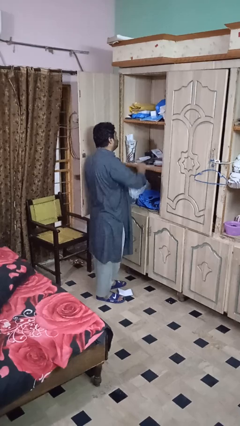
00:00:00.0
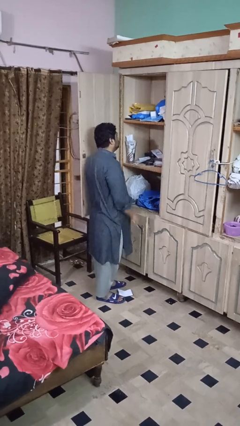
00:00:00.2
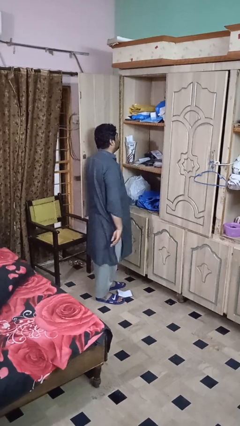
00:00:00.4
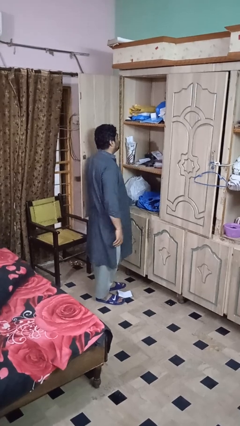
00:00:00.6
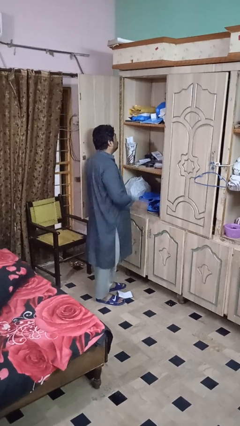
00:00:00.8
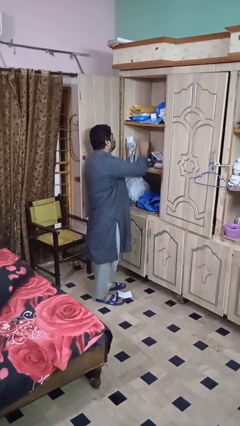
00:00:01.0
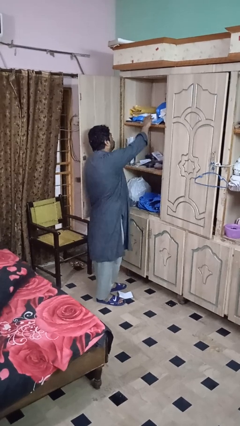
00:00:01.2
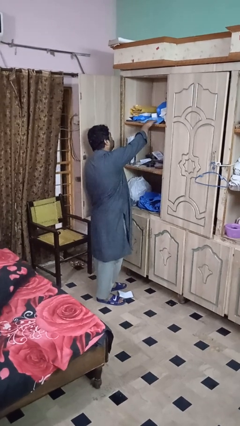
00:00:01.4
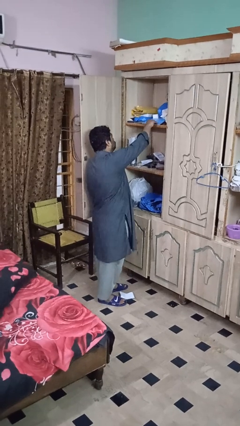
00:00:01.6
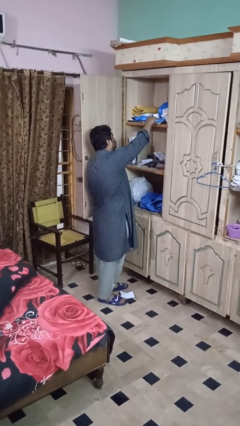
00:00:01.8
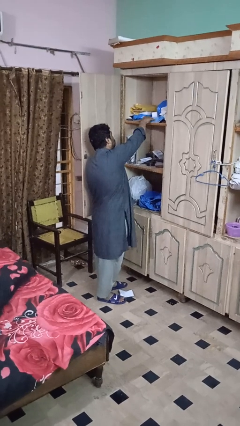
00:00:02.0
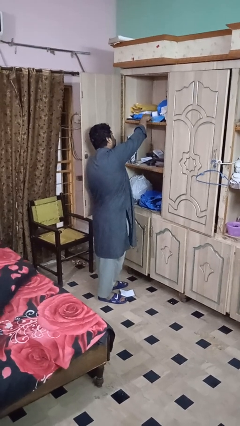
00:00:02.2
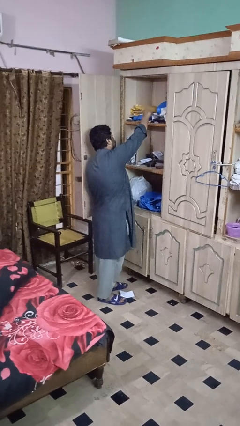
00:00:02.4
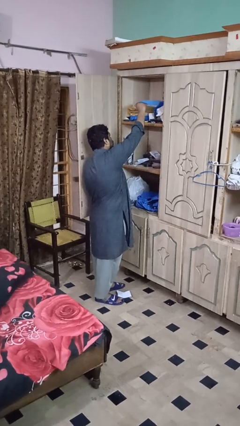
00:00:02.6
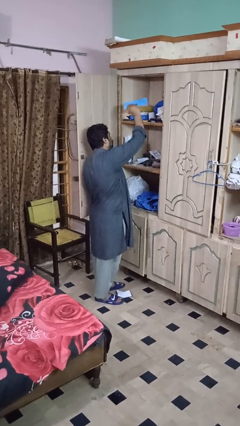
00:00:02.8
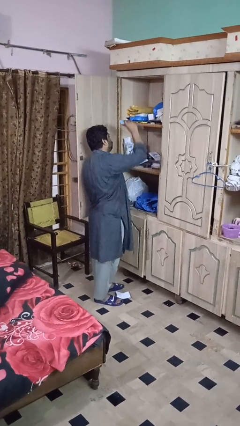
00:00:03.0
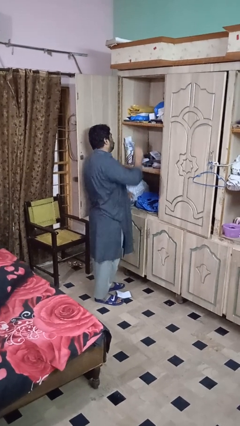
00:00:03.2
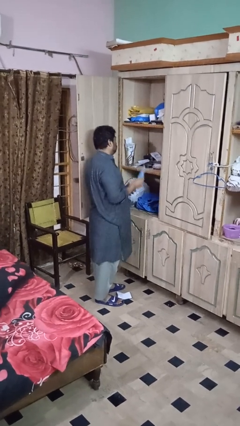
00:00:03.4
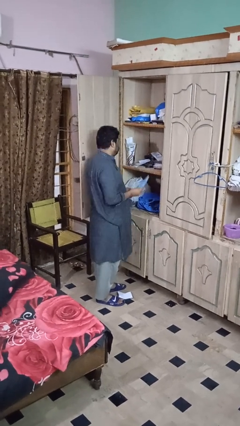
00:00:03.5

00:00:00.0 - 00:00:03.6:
person picks up object from shelf

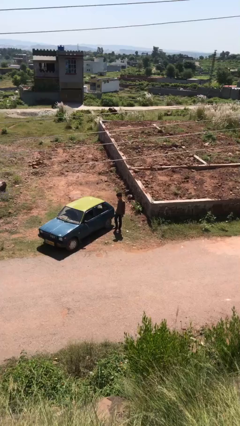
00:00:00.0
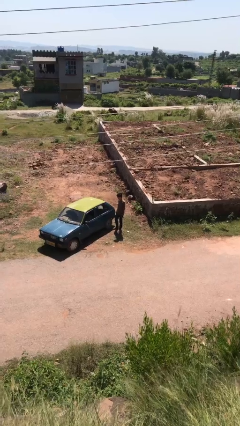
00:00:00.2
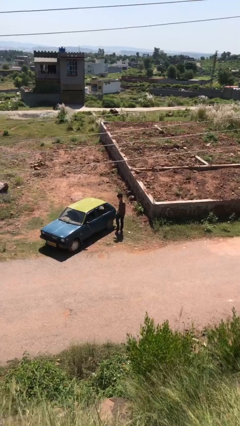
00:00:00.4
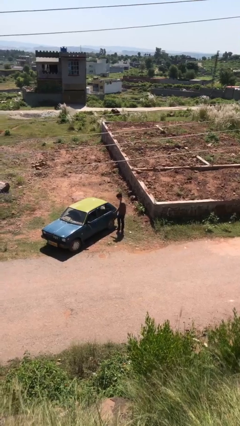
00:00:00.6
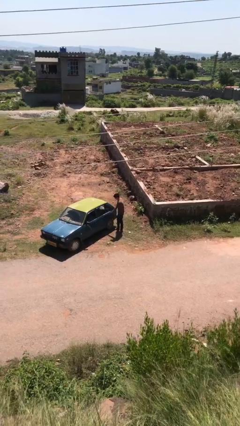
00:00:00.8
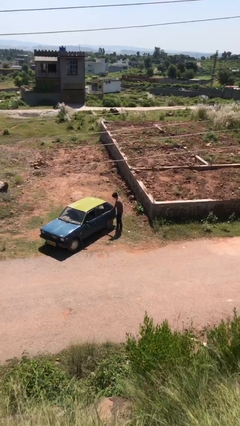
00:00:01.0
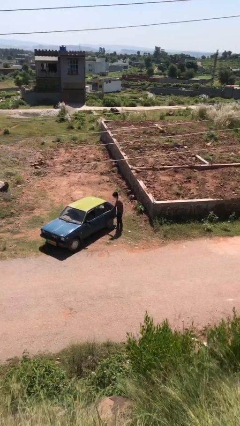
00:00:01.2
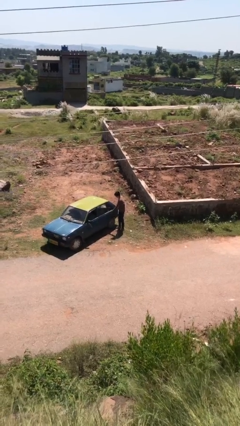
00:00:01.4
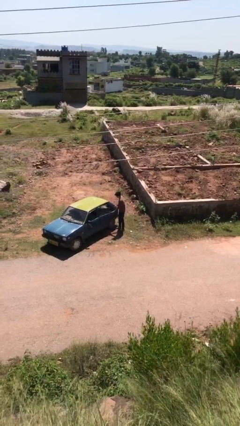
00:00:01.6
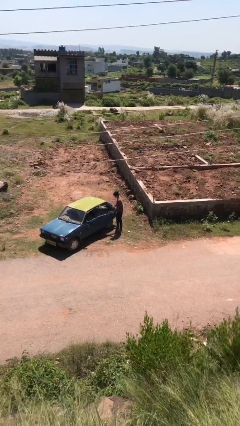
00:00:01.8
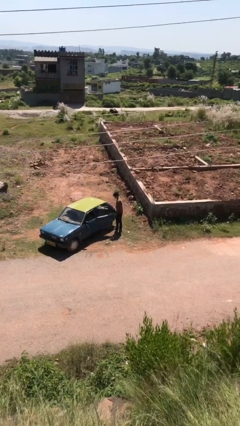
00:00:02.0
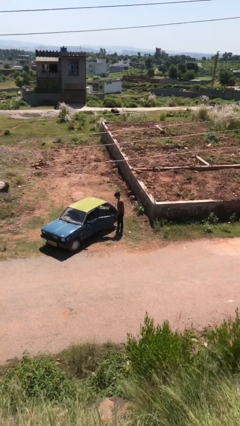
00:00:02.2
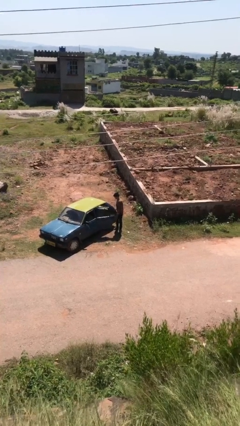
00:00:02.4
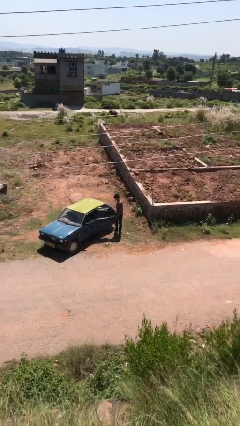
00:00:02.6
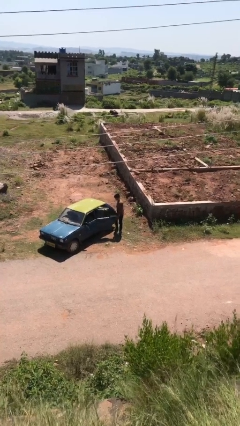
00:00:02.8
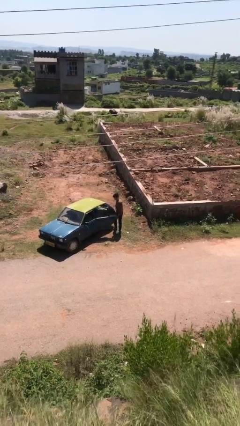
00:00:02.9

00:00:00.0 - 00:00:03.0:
person opens car door

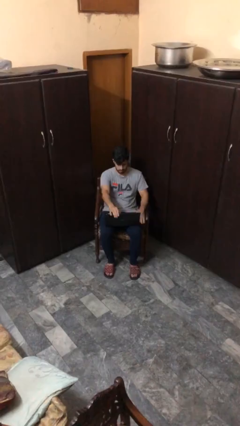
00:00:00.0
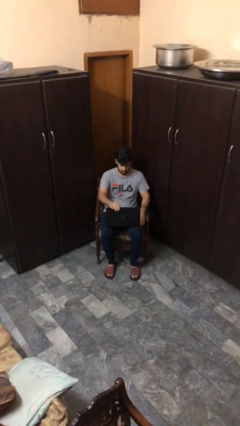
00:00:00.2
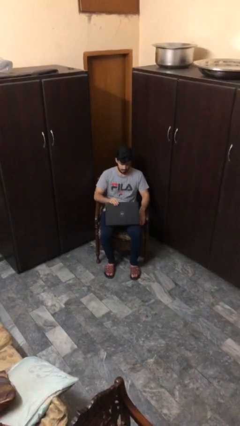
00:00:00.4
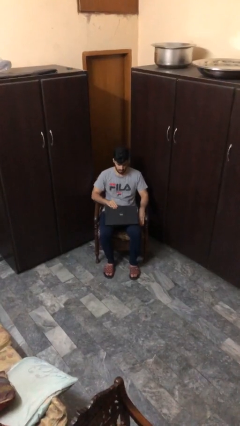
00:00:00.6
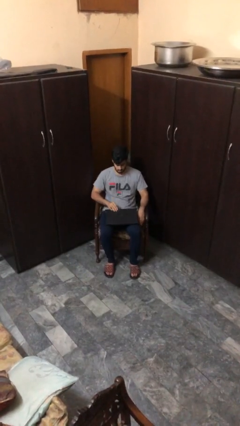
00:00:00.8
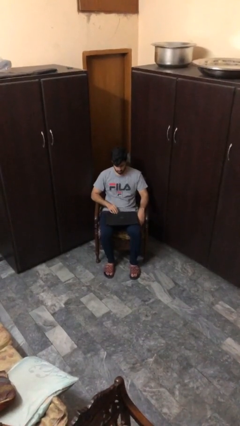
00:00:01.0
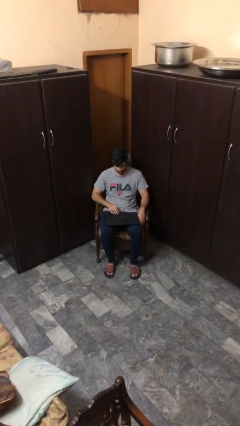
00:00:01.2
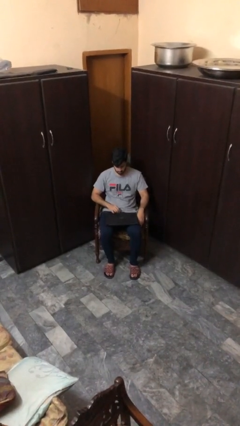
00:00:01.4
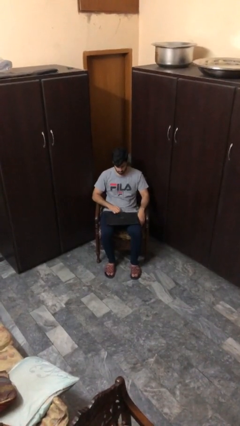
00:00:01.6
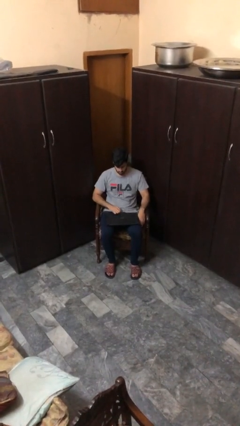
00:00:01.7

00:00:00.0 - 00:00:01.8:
person closes laptop

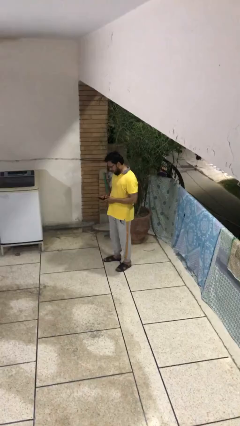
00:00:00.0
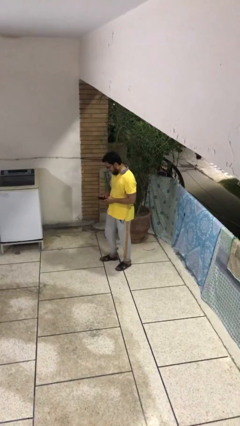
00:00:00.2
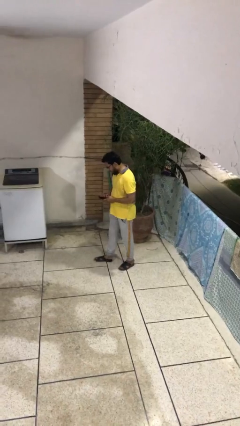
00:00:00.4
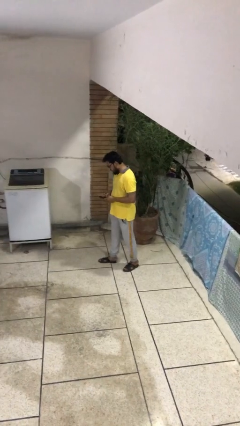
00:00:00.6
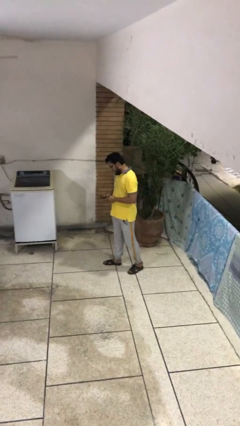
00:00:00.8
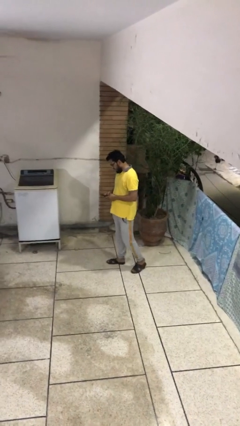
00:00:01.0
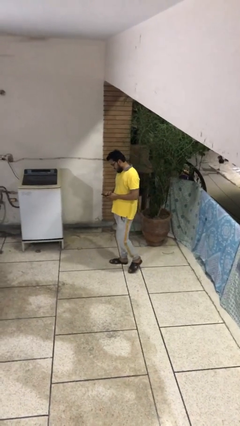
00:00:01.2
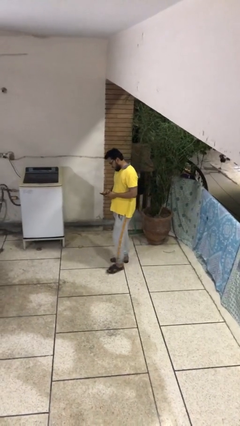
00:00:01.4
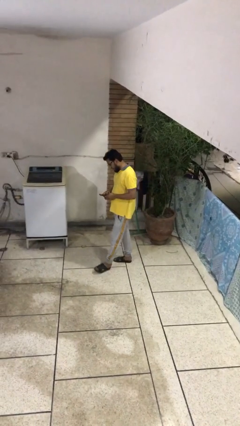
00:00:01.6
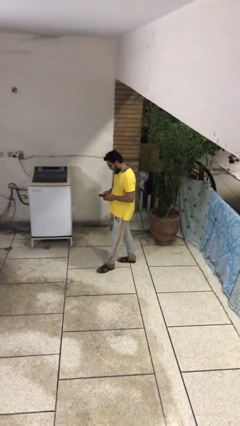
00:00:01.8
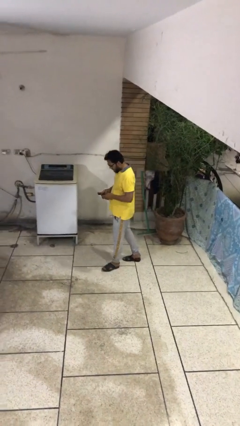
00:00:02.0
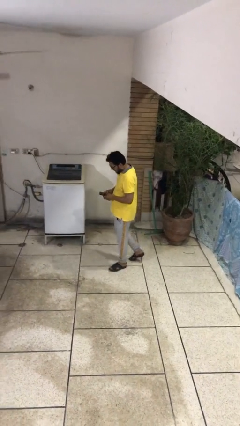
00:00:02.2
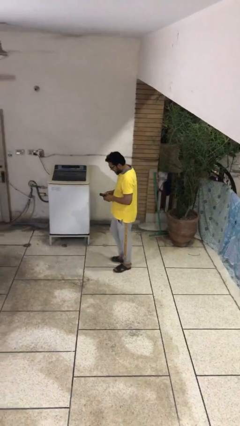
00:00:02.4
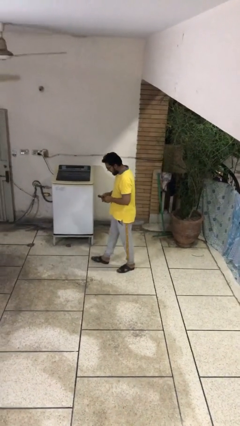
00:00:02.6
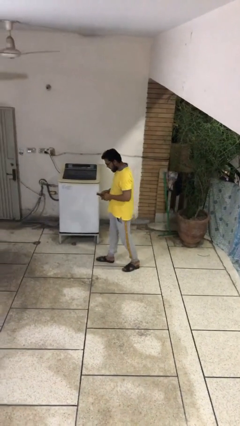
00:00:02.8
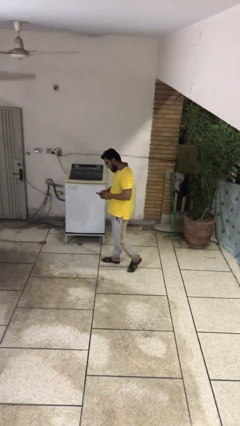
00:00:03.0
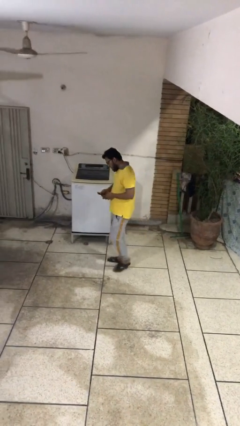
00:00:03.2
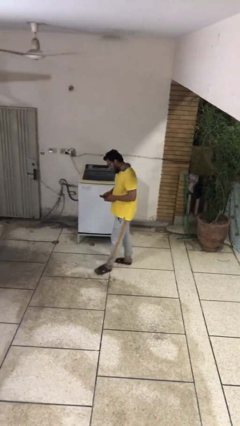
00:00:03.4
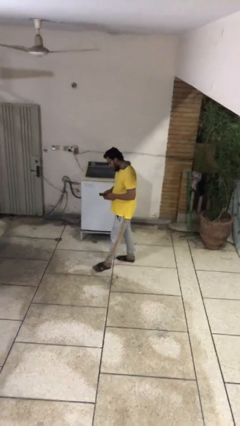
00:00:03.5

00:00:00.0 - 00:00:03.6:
person texts on phone

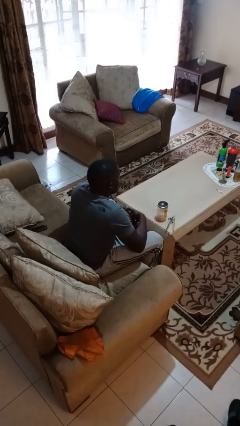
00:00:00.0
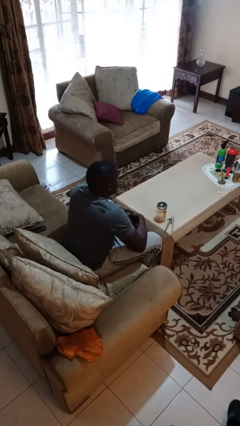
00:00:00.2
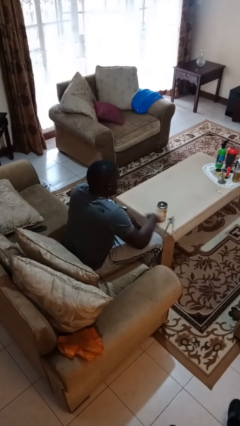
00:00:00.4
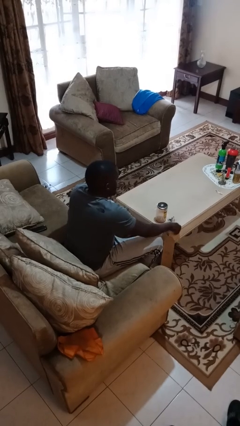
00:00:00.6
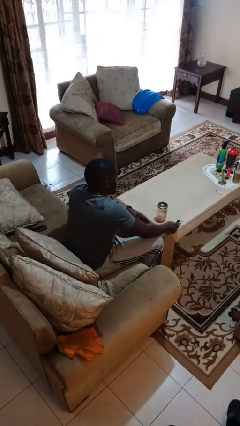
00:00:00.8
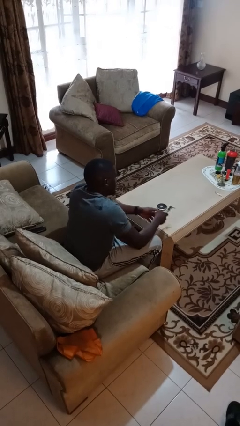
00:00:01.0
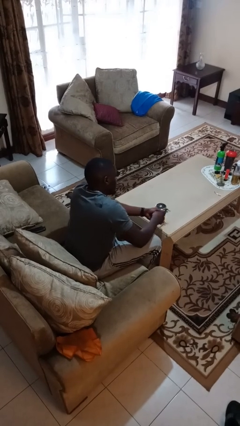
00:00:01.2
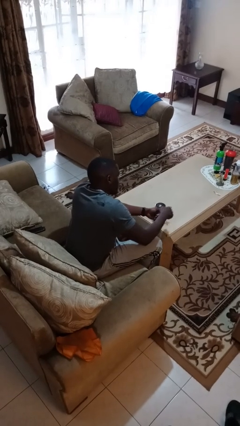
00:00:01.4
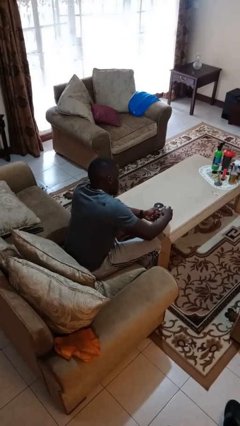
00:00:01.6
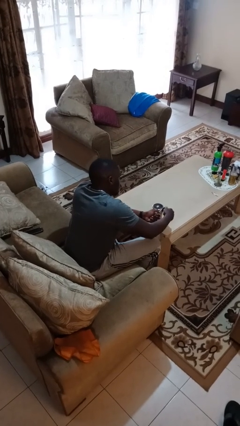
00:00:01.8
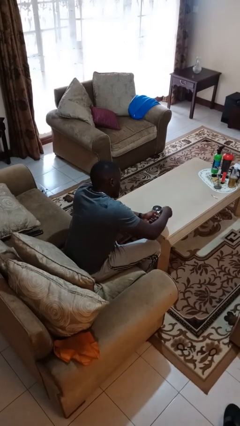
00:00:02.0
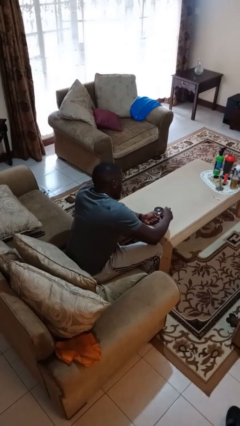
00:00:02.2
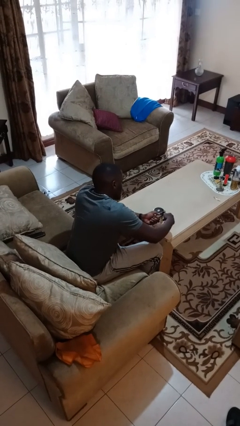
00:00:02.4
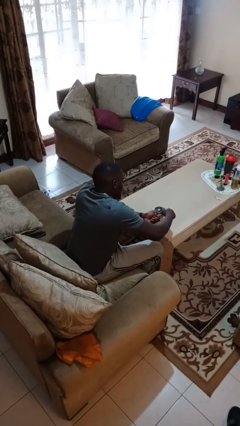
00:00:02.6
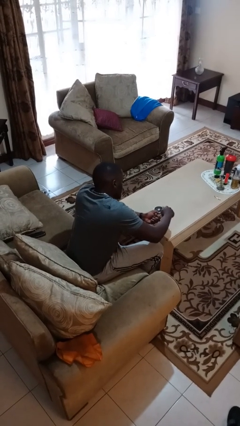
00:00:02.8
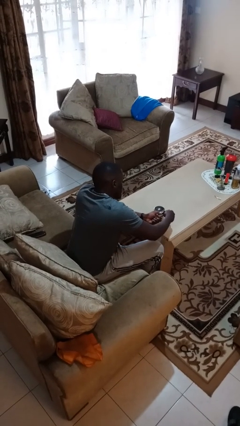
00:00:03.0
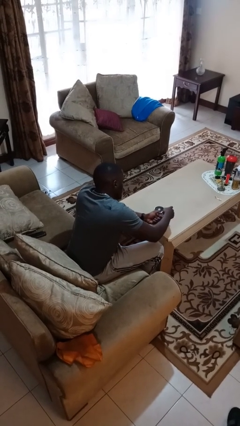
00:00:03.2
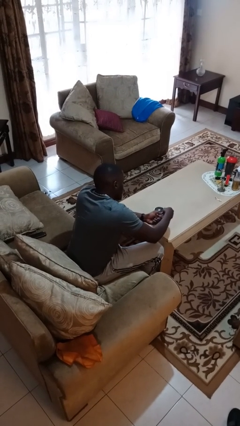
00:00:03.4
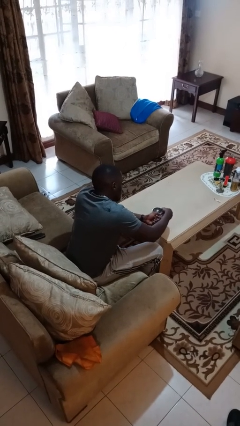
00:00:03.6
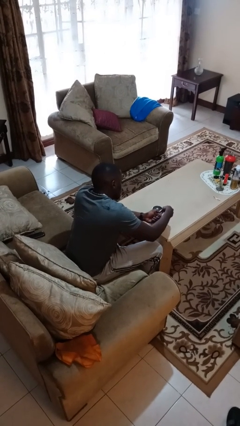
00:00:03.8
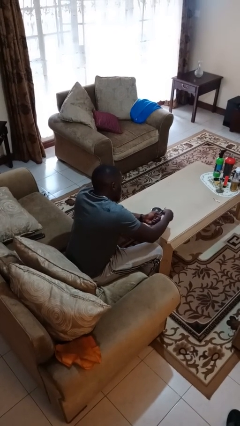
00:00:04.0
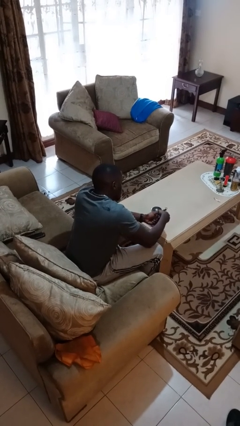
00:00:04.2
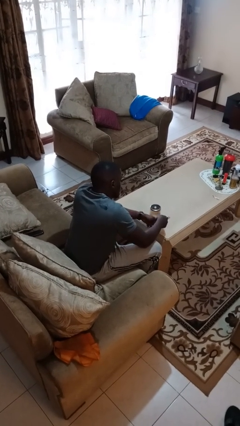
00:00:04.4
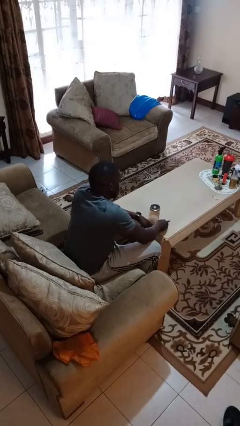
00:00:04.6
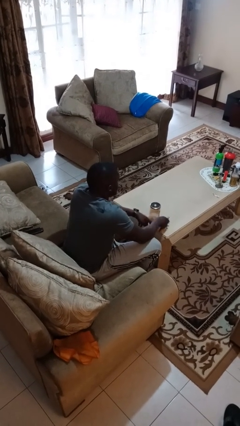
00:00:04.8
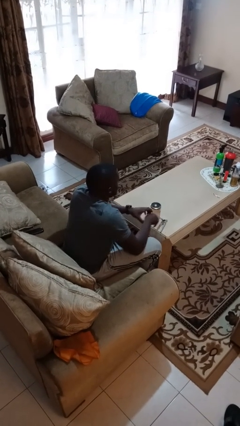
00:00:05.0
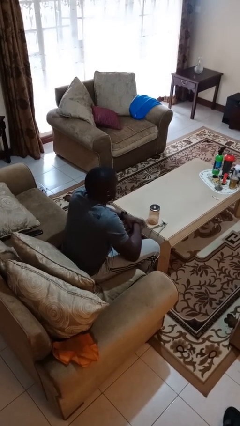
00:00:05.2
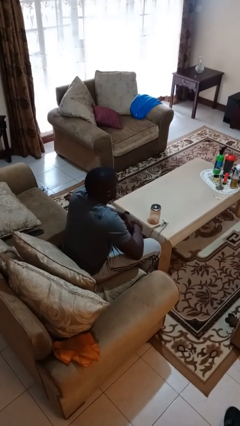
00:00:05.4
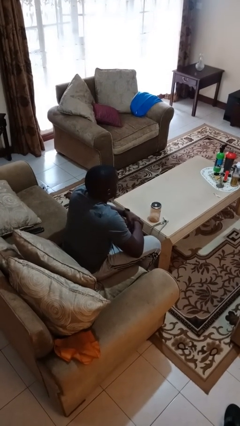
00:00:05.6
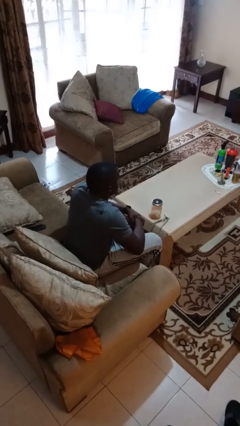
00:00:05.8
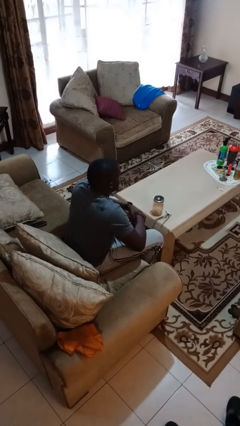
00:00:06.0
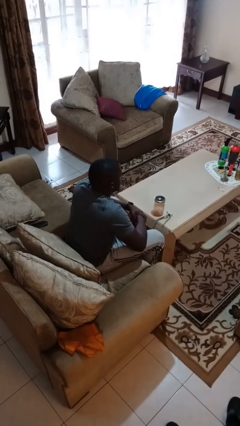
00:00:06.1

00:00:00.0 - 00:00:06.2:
person opens can with can opener
